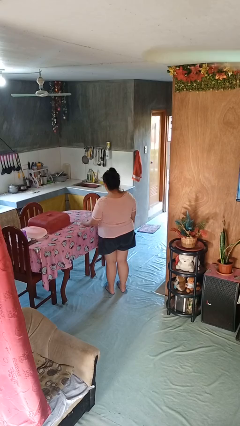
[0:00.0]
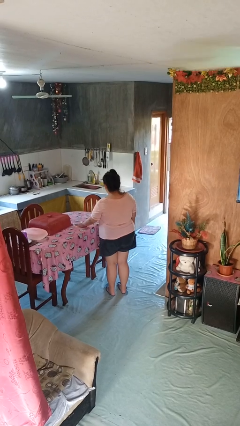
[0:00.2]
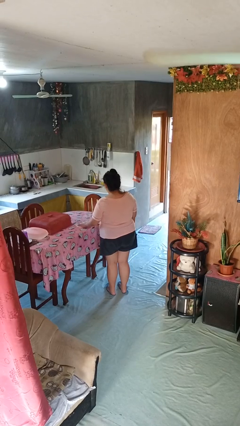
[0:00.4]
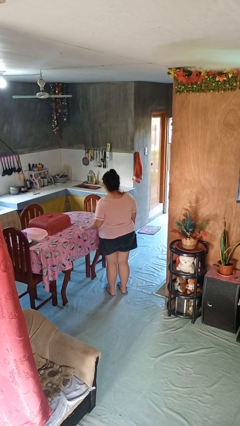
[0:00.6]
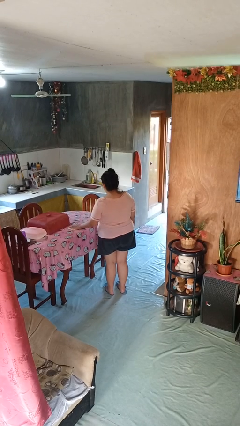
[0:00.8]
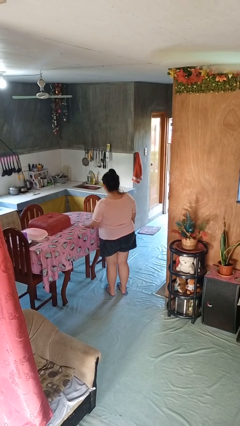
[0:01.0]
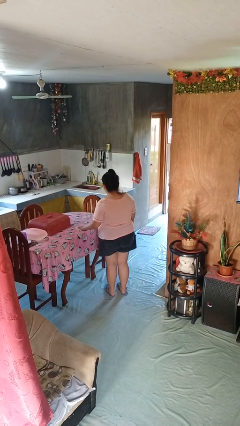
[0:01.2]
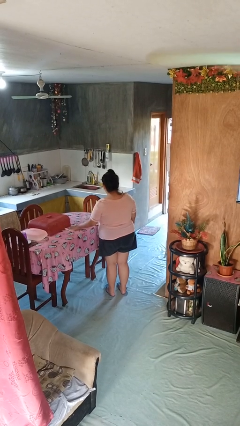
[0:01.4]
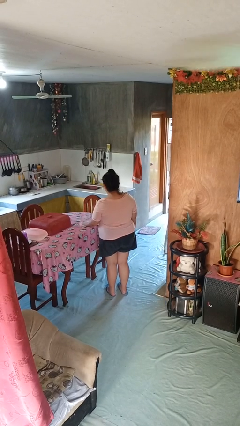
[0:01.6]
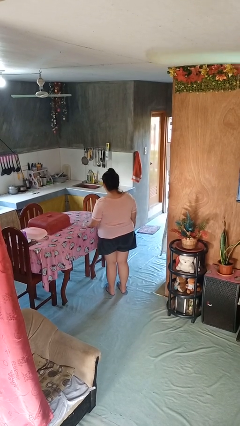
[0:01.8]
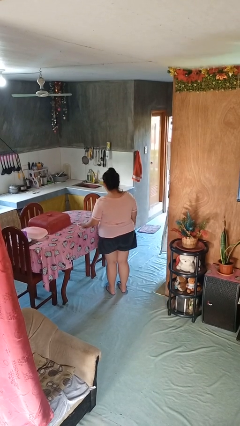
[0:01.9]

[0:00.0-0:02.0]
person cleans table with rag

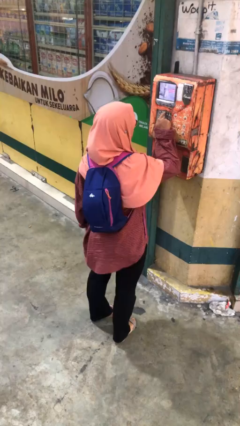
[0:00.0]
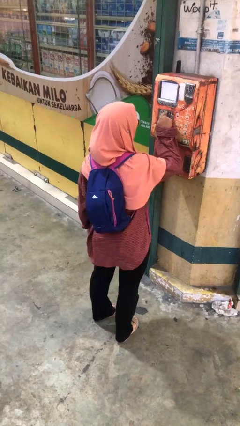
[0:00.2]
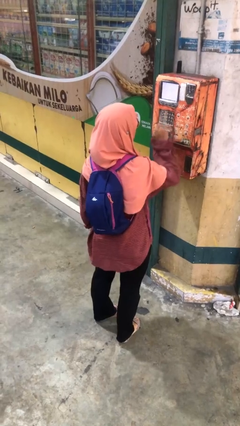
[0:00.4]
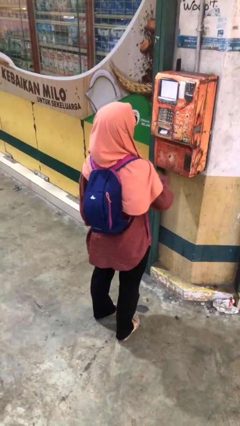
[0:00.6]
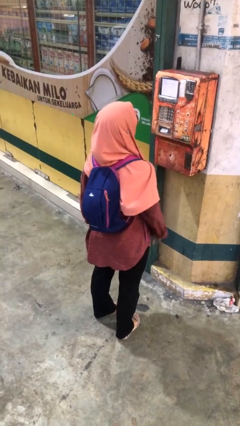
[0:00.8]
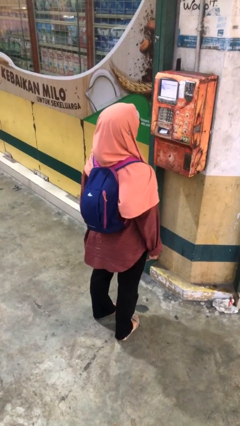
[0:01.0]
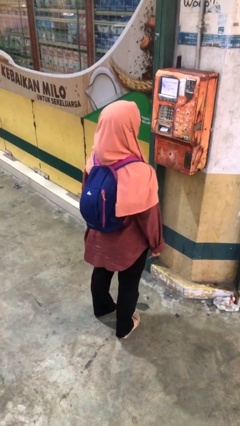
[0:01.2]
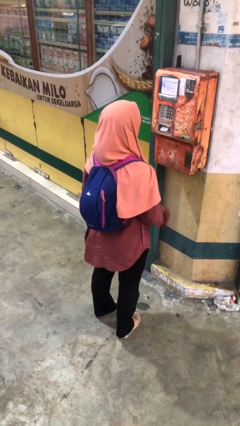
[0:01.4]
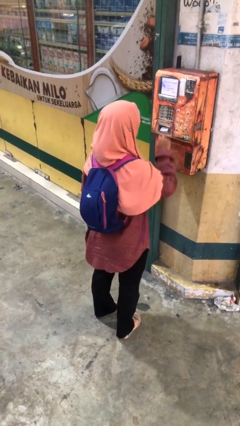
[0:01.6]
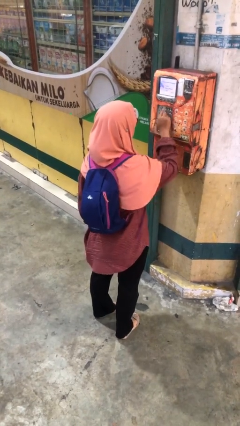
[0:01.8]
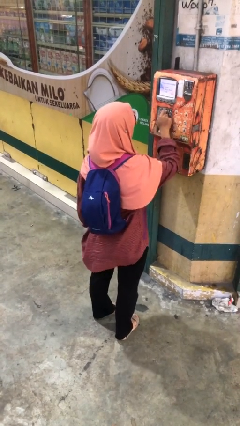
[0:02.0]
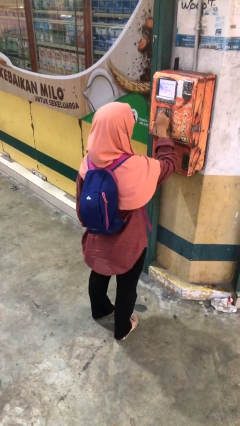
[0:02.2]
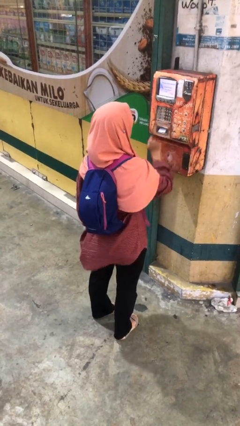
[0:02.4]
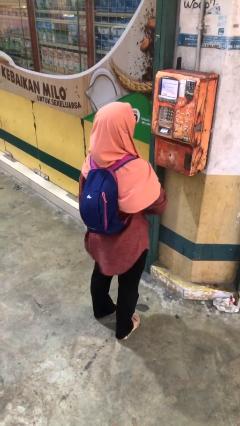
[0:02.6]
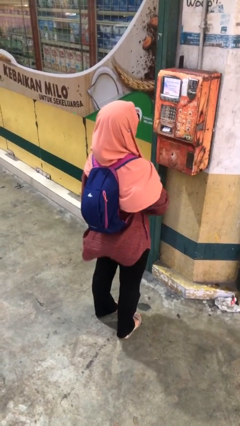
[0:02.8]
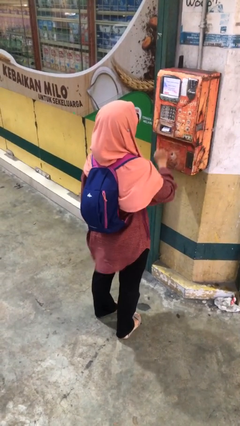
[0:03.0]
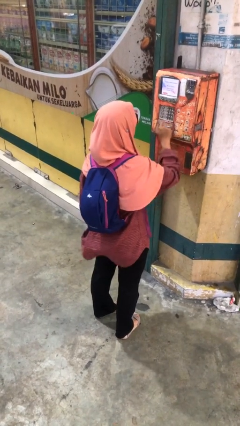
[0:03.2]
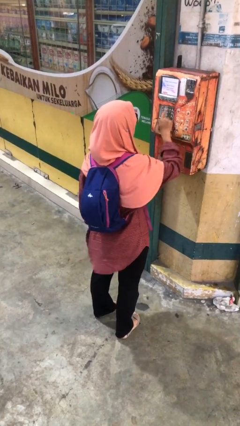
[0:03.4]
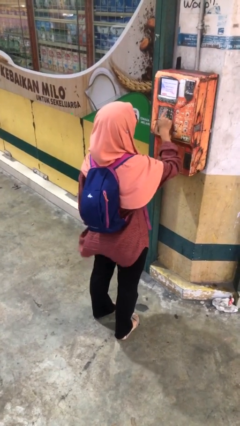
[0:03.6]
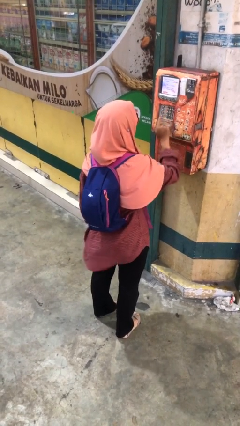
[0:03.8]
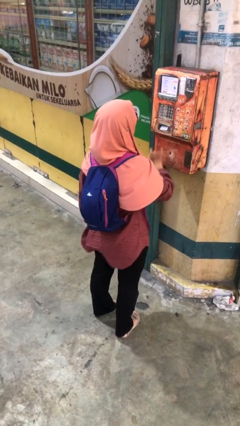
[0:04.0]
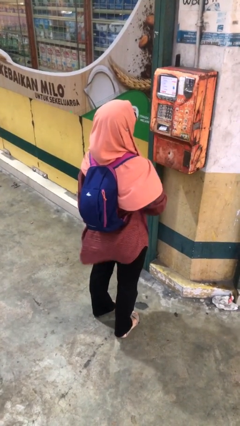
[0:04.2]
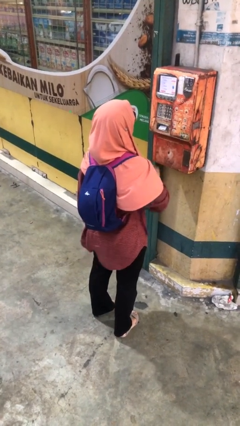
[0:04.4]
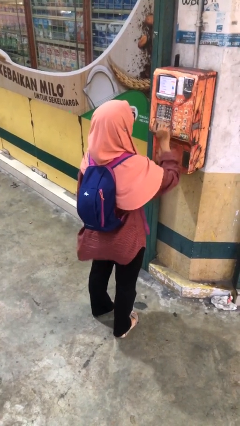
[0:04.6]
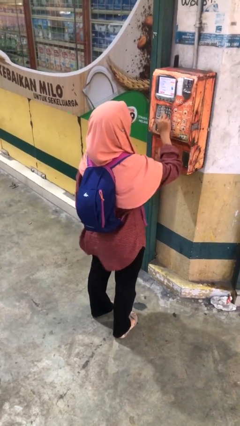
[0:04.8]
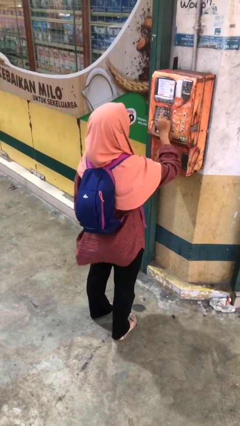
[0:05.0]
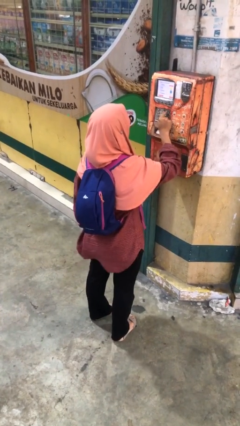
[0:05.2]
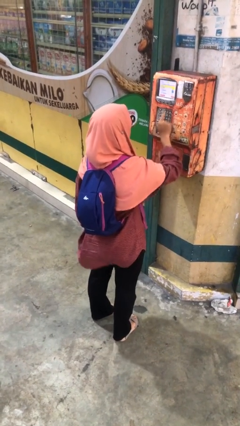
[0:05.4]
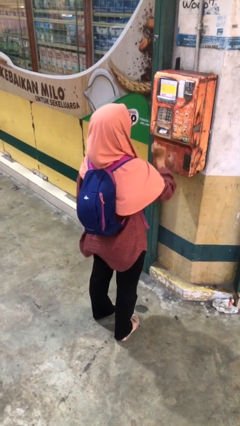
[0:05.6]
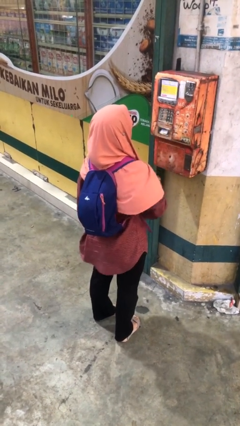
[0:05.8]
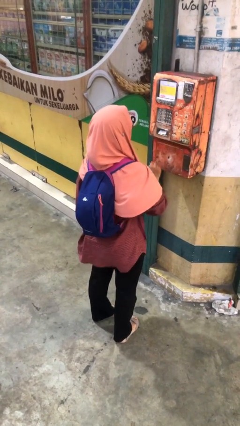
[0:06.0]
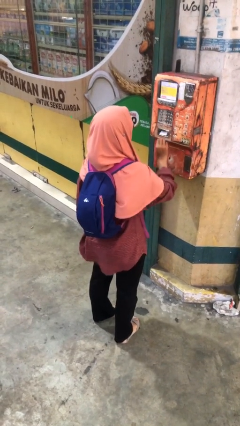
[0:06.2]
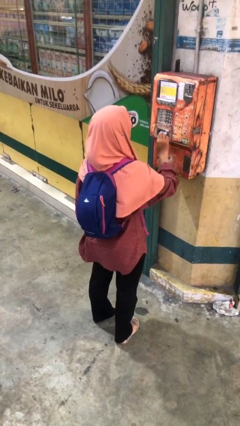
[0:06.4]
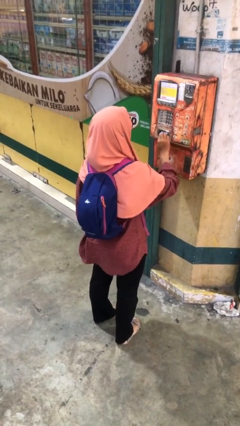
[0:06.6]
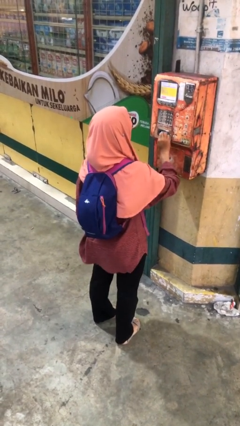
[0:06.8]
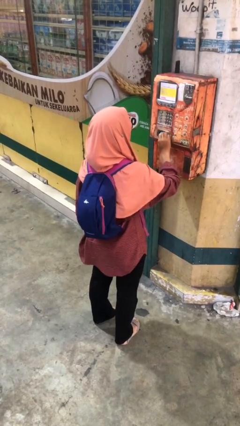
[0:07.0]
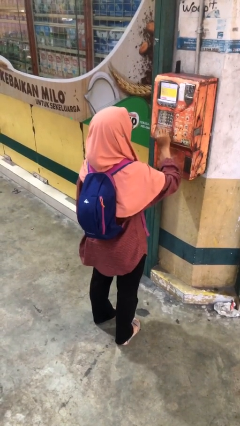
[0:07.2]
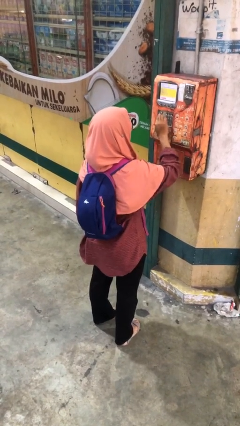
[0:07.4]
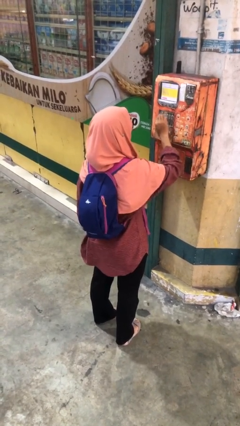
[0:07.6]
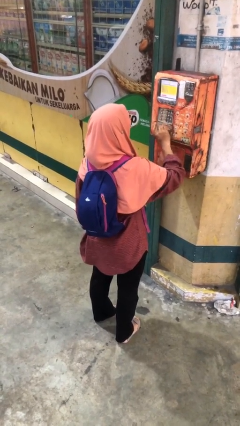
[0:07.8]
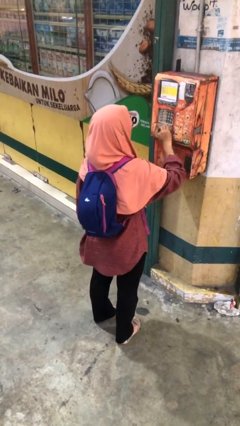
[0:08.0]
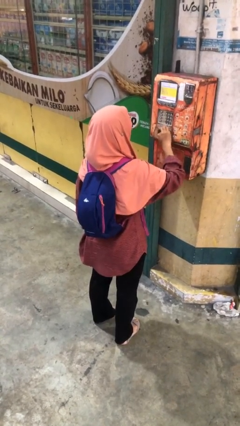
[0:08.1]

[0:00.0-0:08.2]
person purchases from machine

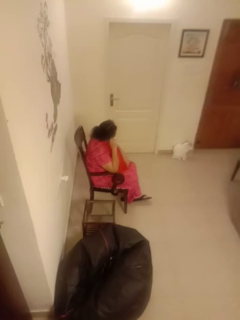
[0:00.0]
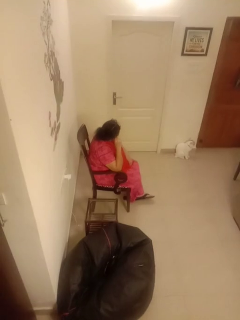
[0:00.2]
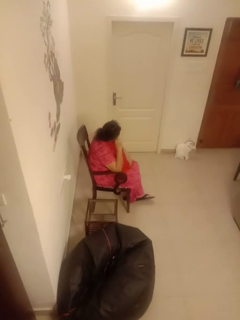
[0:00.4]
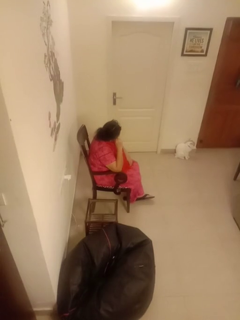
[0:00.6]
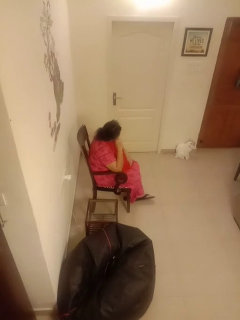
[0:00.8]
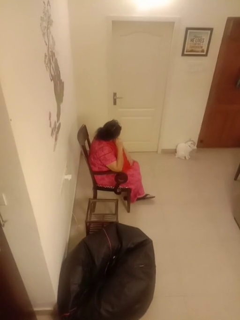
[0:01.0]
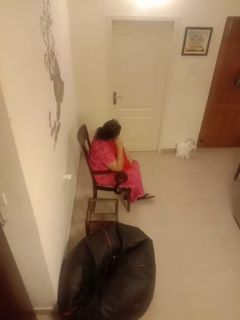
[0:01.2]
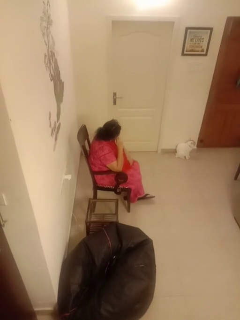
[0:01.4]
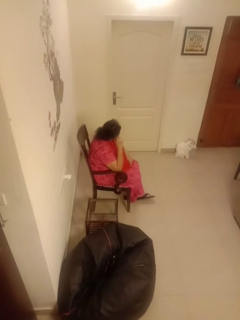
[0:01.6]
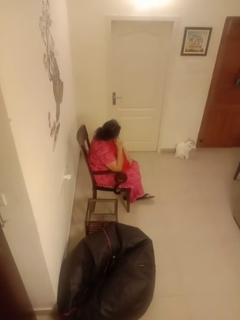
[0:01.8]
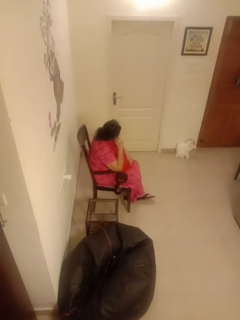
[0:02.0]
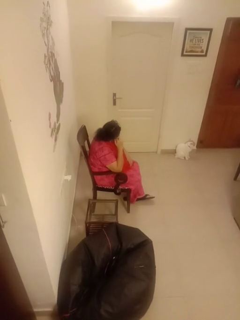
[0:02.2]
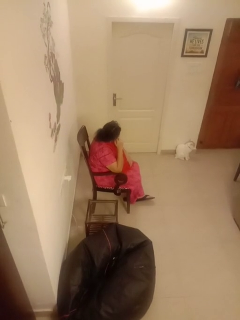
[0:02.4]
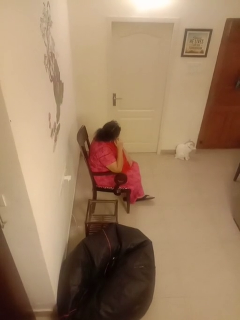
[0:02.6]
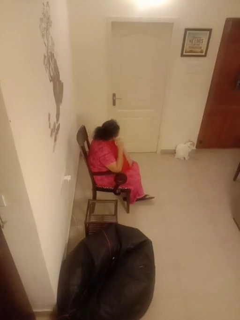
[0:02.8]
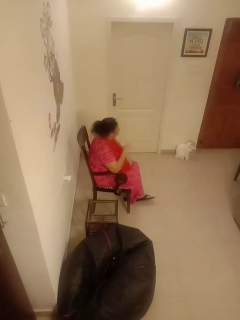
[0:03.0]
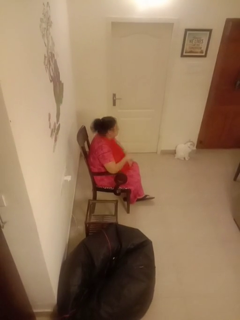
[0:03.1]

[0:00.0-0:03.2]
person touches earlobe

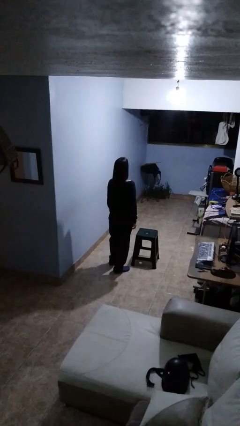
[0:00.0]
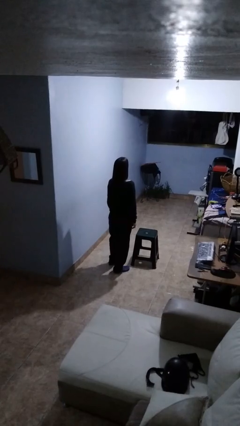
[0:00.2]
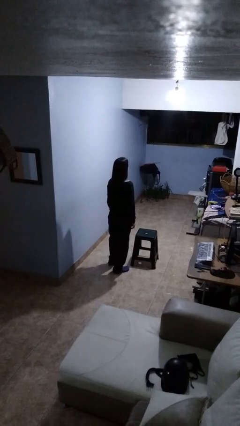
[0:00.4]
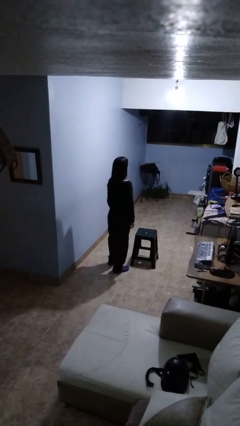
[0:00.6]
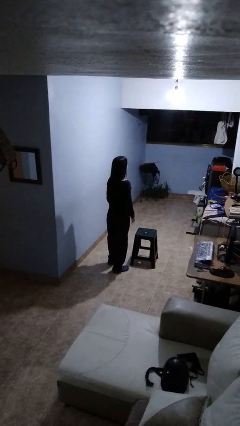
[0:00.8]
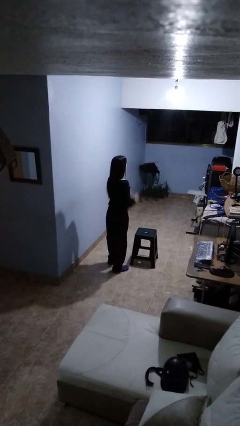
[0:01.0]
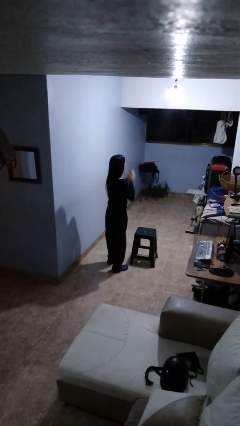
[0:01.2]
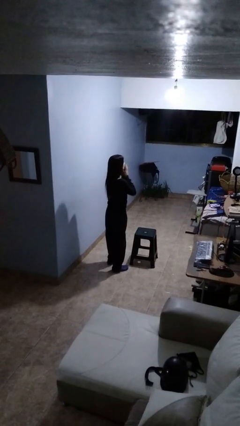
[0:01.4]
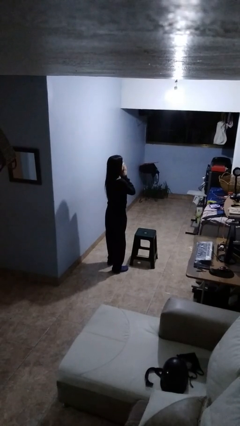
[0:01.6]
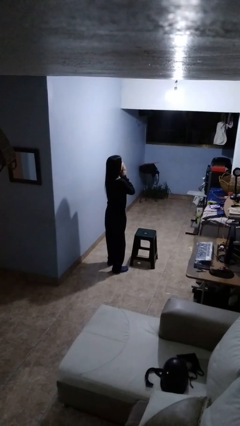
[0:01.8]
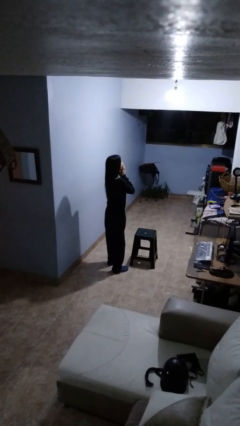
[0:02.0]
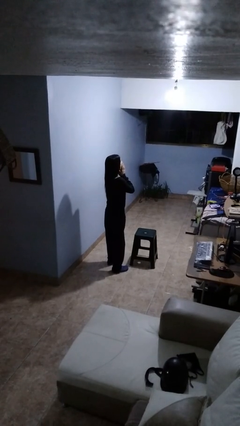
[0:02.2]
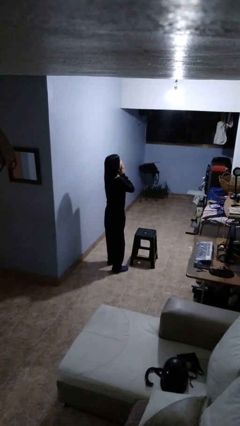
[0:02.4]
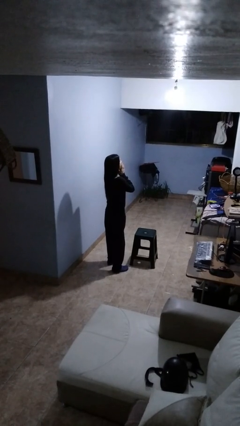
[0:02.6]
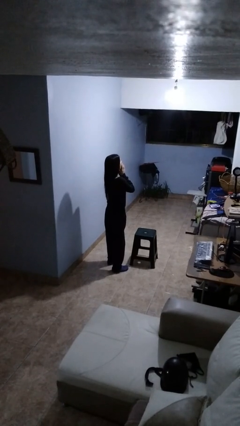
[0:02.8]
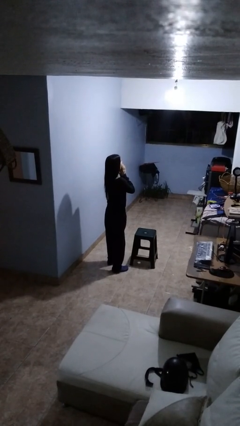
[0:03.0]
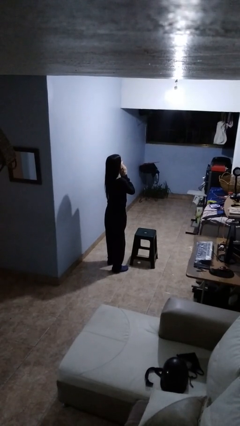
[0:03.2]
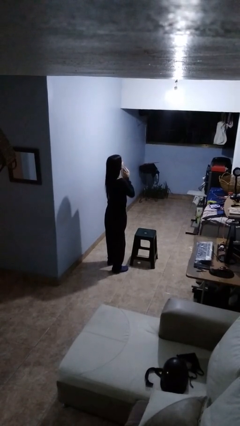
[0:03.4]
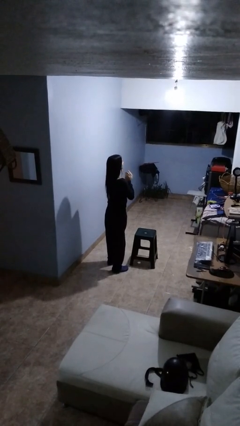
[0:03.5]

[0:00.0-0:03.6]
person yawns

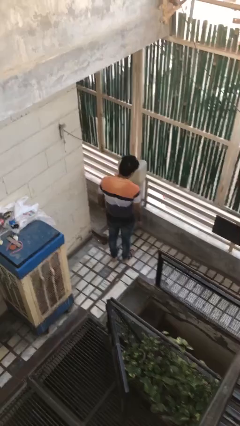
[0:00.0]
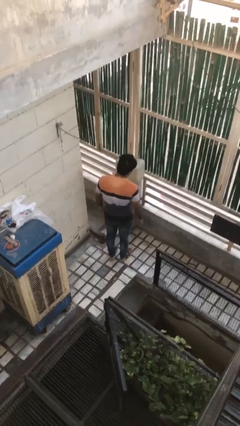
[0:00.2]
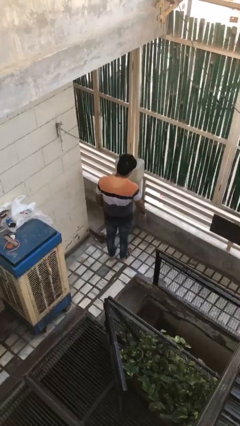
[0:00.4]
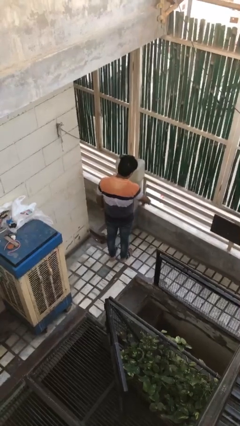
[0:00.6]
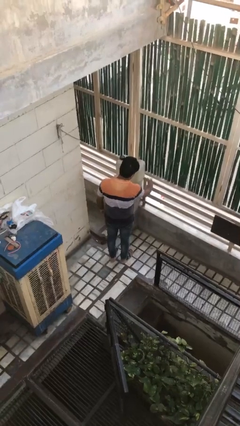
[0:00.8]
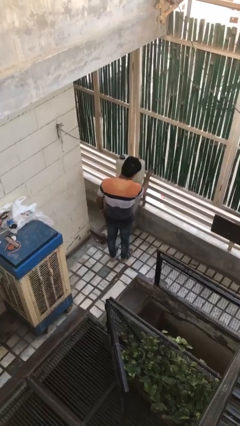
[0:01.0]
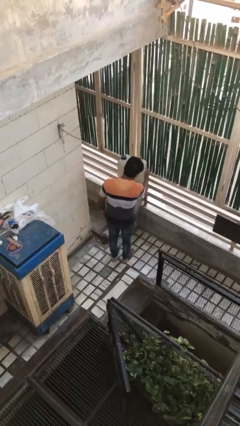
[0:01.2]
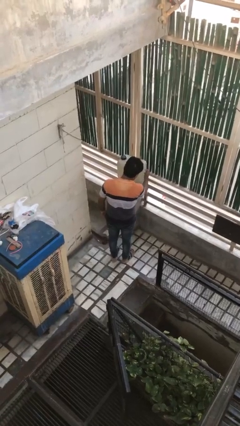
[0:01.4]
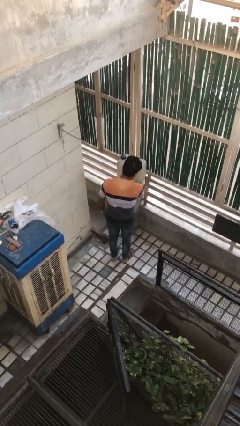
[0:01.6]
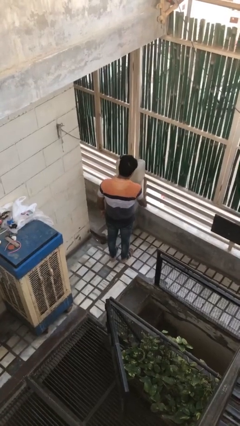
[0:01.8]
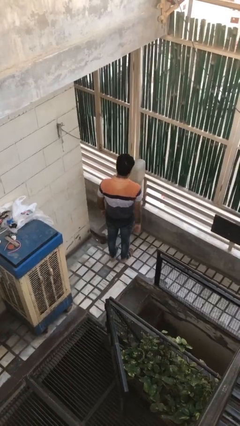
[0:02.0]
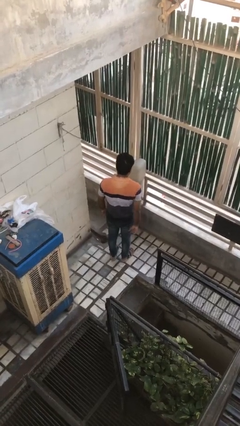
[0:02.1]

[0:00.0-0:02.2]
person taps object with finger
